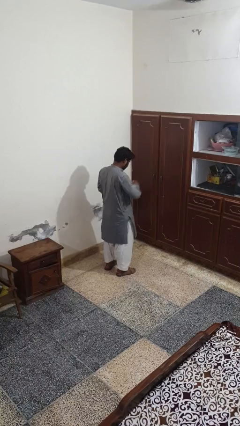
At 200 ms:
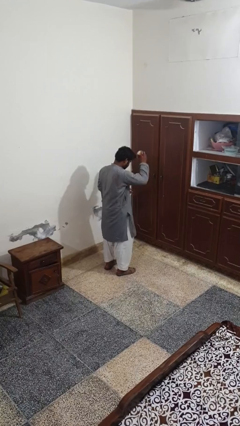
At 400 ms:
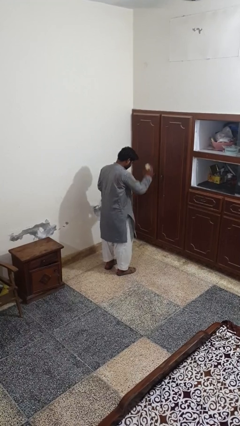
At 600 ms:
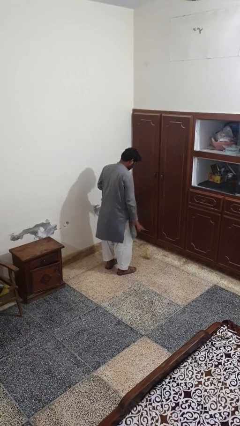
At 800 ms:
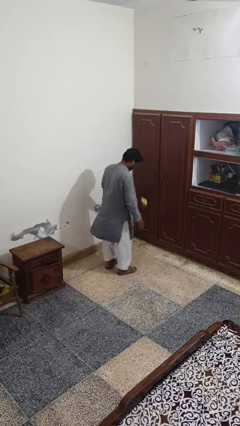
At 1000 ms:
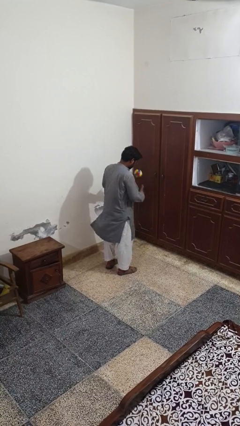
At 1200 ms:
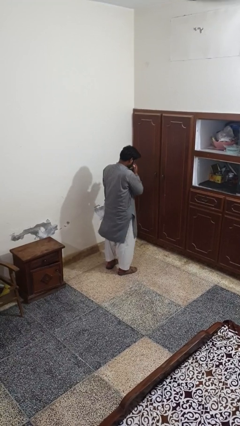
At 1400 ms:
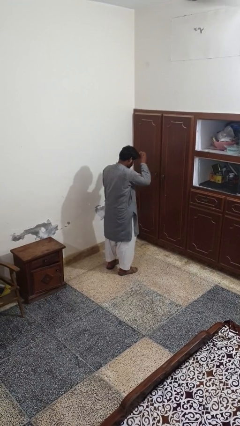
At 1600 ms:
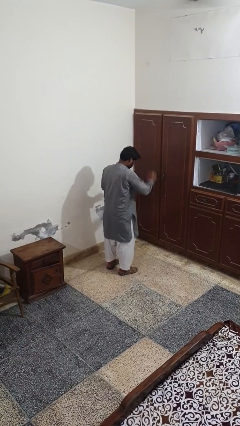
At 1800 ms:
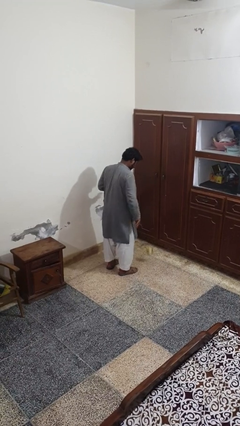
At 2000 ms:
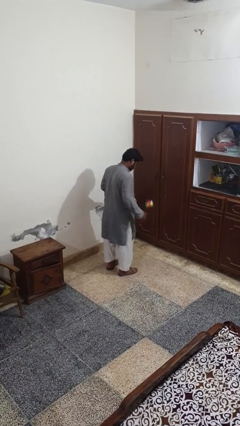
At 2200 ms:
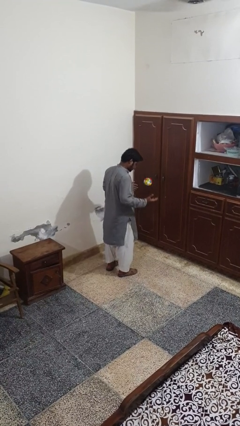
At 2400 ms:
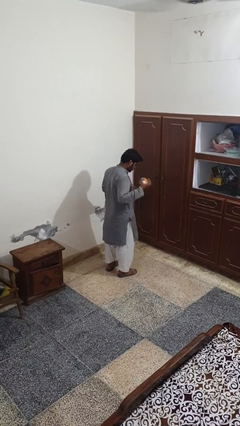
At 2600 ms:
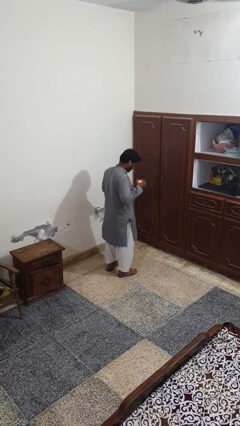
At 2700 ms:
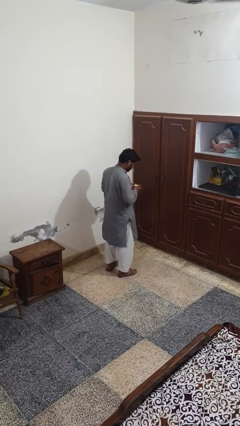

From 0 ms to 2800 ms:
person bounces ball on floor

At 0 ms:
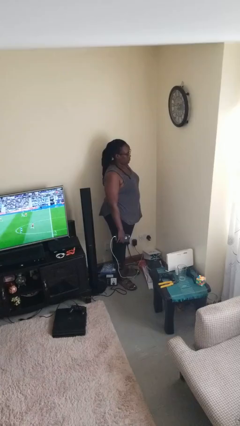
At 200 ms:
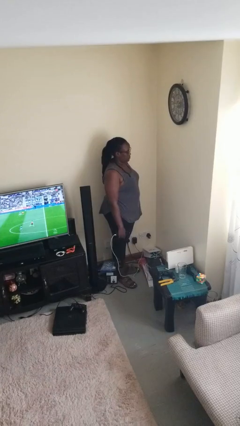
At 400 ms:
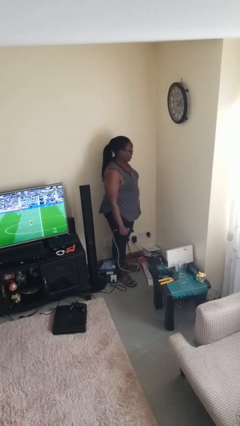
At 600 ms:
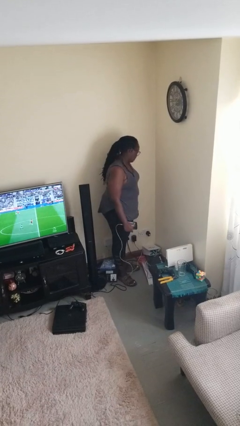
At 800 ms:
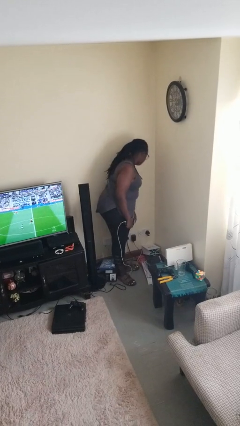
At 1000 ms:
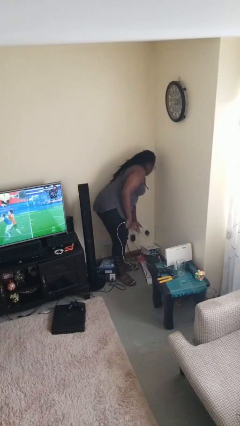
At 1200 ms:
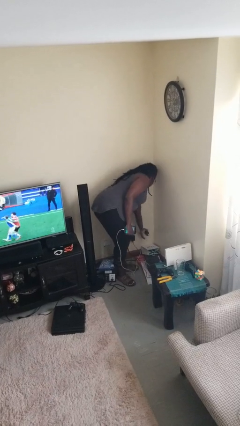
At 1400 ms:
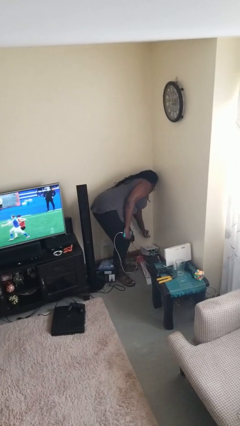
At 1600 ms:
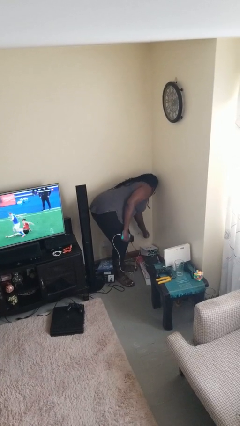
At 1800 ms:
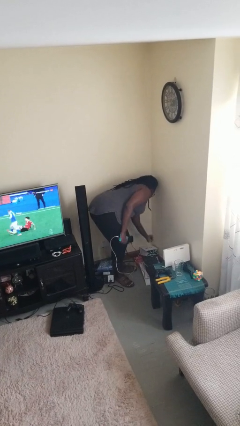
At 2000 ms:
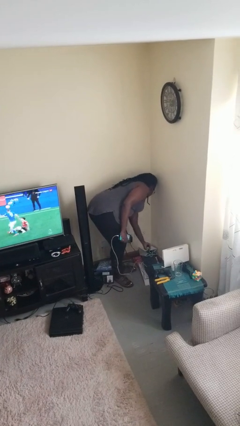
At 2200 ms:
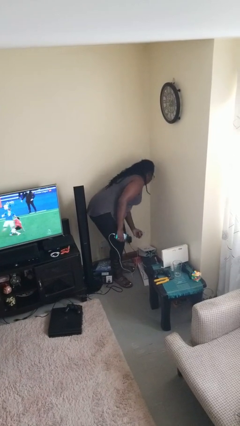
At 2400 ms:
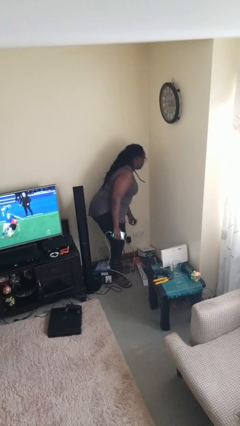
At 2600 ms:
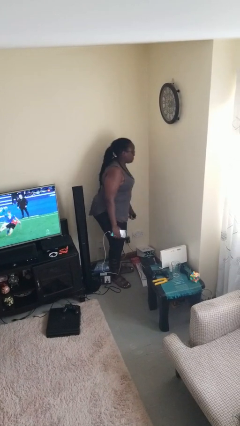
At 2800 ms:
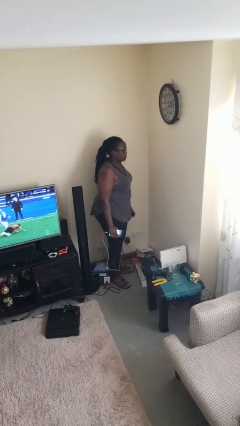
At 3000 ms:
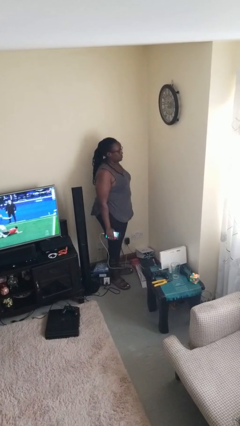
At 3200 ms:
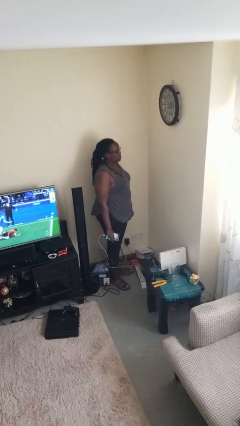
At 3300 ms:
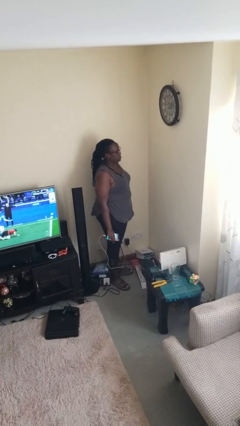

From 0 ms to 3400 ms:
person unplugs from electrical socket

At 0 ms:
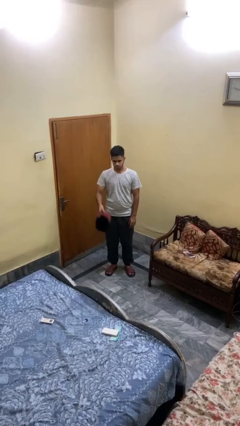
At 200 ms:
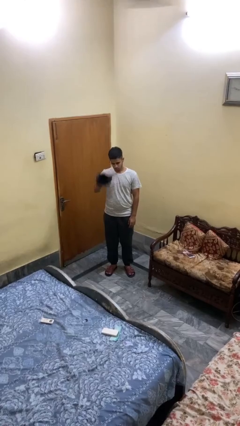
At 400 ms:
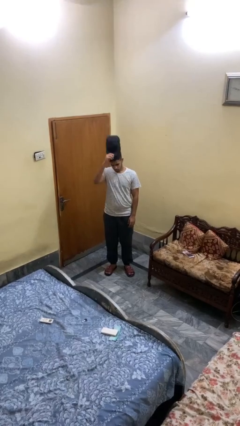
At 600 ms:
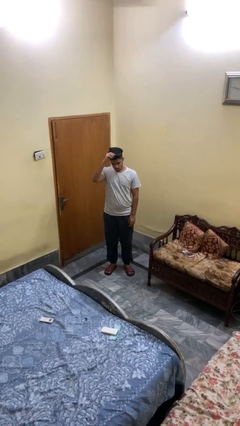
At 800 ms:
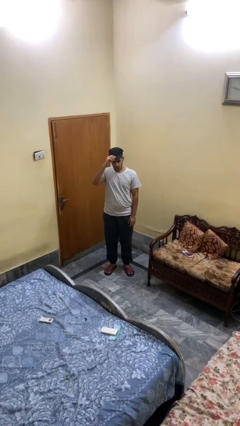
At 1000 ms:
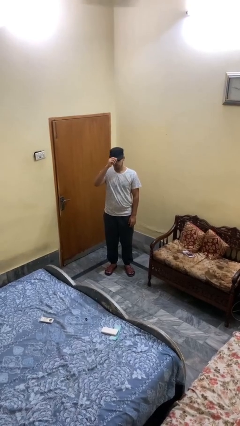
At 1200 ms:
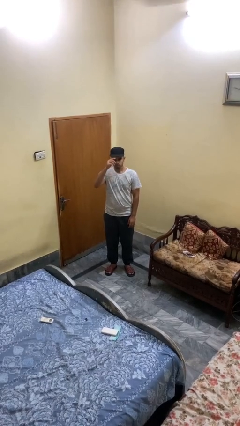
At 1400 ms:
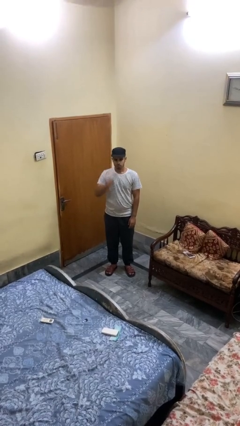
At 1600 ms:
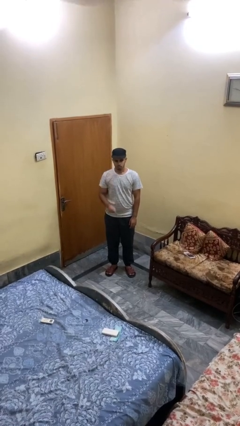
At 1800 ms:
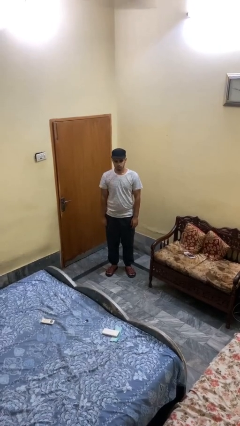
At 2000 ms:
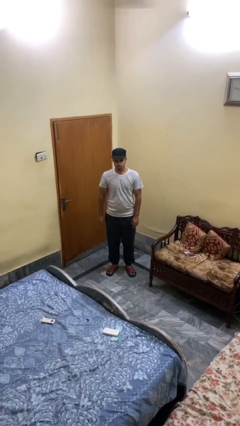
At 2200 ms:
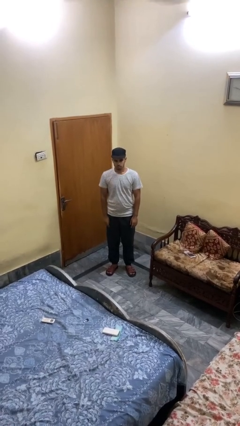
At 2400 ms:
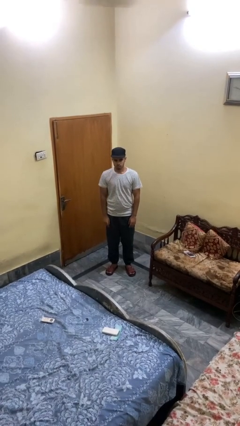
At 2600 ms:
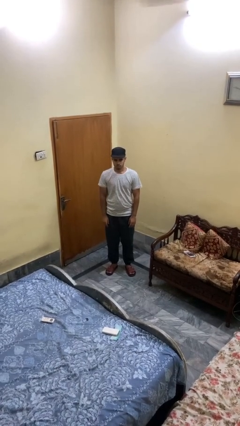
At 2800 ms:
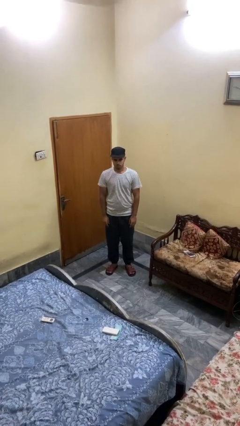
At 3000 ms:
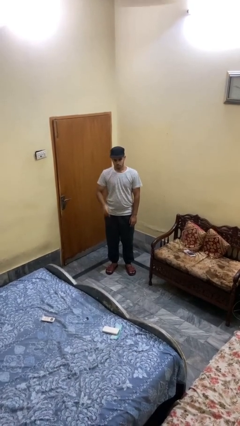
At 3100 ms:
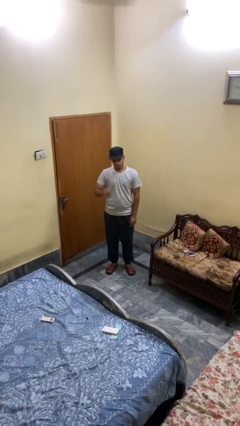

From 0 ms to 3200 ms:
person puts on hat

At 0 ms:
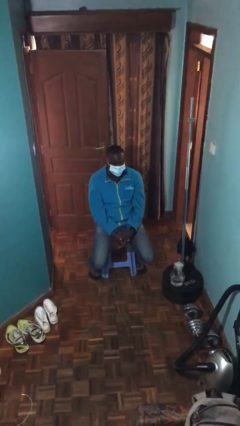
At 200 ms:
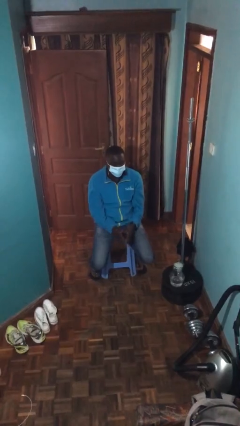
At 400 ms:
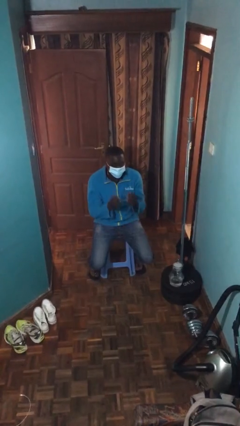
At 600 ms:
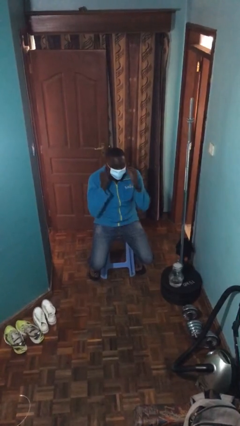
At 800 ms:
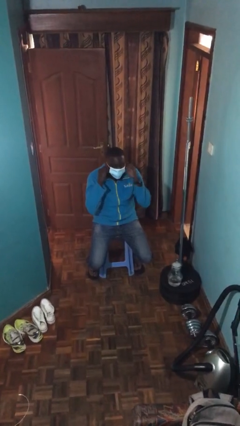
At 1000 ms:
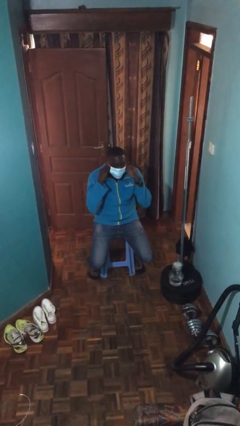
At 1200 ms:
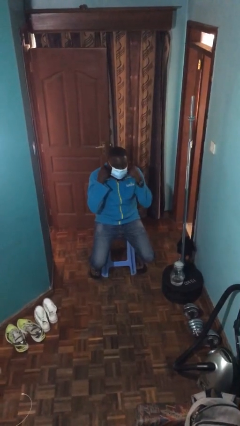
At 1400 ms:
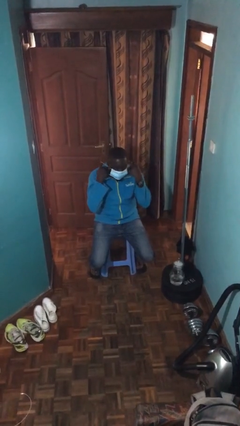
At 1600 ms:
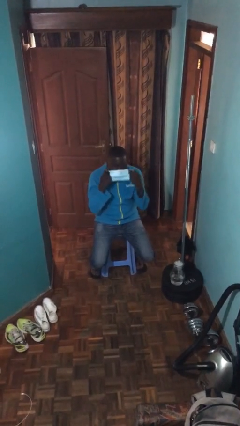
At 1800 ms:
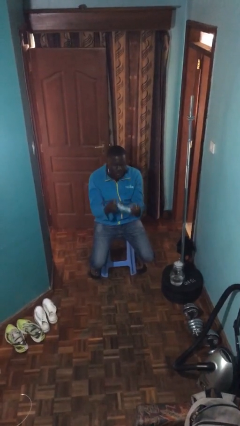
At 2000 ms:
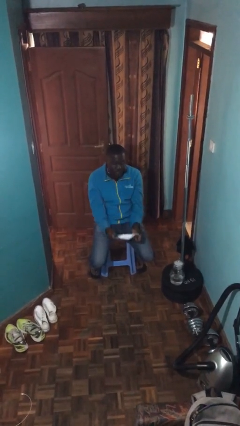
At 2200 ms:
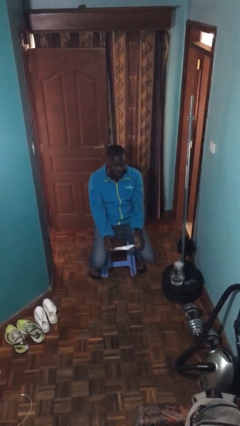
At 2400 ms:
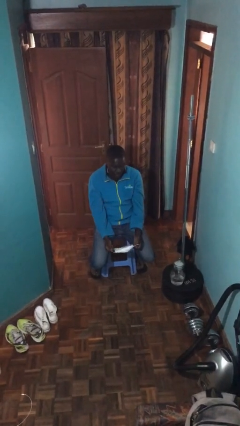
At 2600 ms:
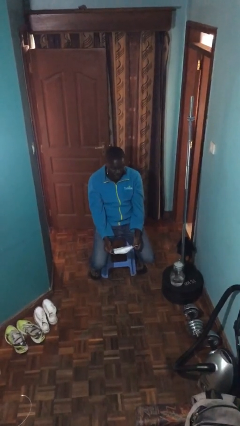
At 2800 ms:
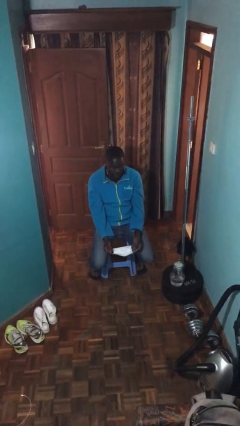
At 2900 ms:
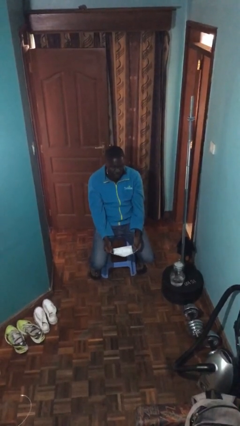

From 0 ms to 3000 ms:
person takes off facemask

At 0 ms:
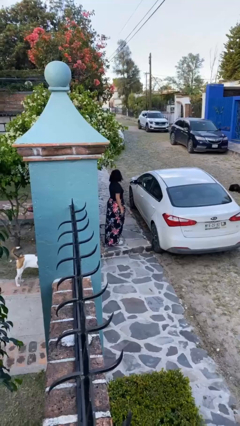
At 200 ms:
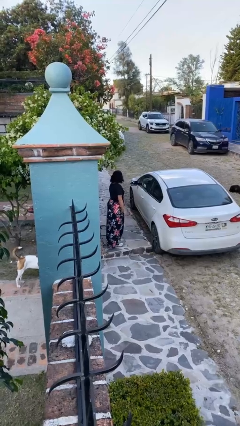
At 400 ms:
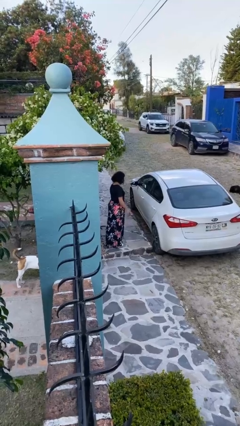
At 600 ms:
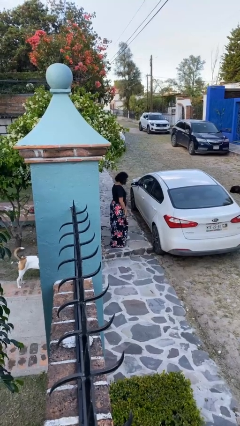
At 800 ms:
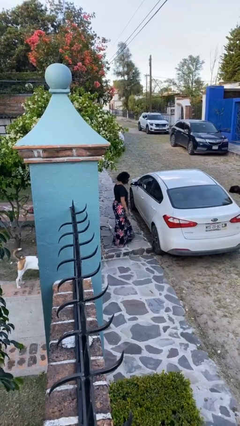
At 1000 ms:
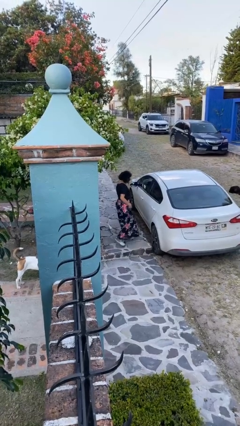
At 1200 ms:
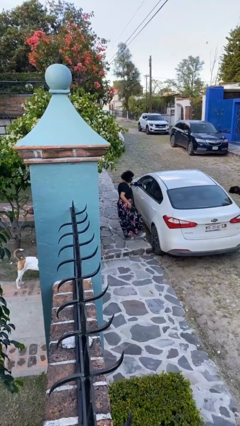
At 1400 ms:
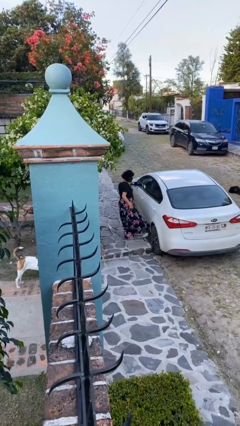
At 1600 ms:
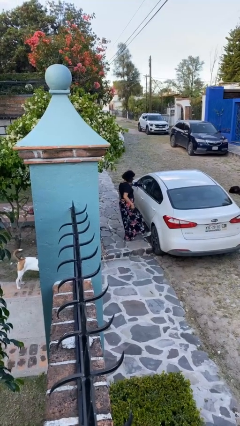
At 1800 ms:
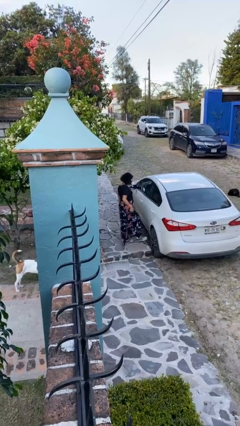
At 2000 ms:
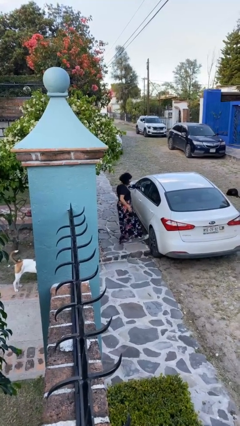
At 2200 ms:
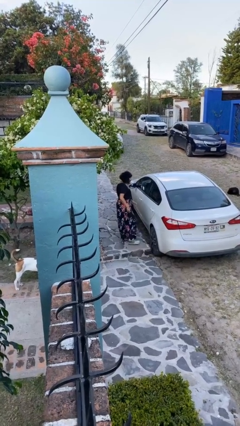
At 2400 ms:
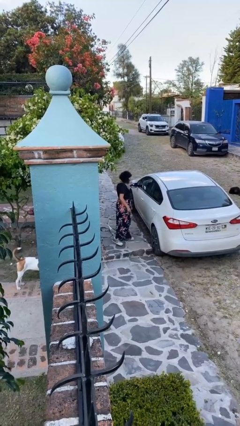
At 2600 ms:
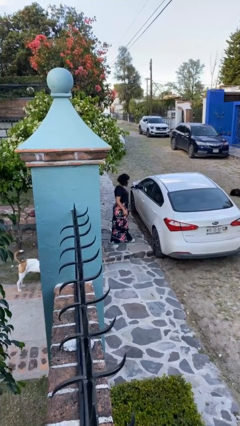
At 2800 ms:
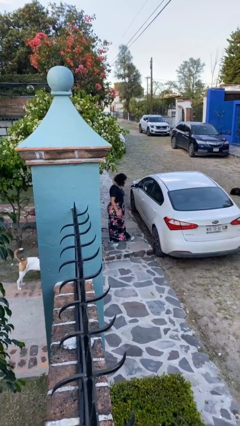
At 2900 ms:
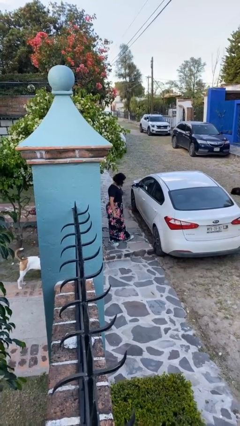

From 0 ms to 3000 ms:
person kicks car tires

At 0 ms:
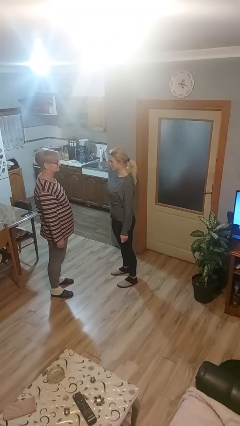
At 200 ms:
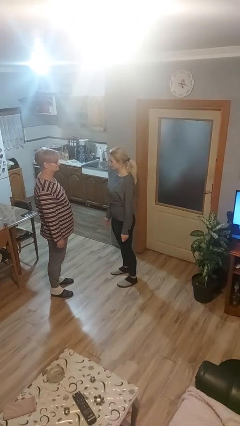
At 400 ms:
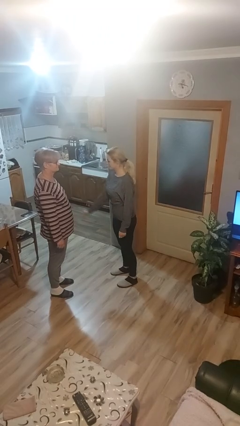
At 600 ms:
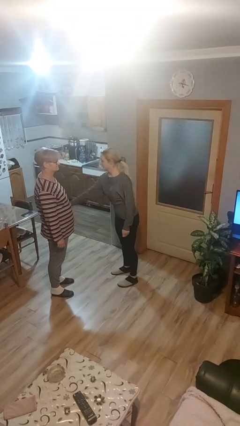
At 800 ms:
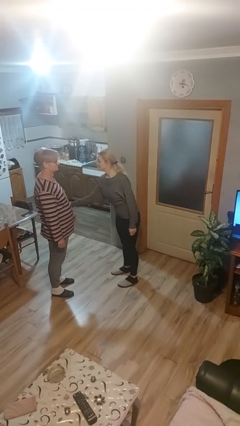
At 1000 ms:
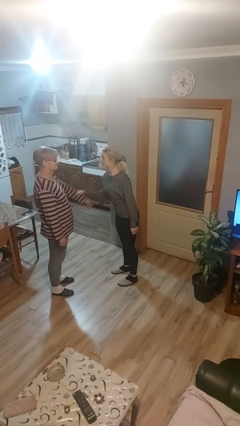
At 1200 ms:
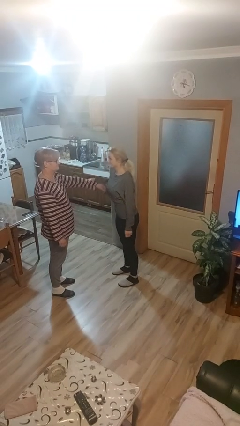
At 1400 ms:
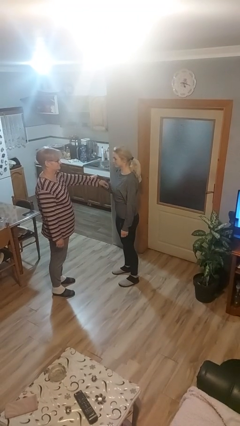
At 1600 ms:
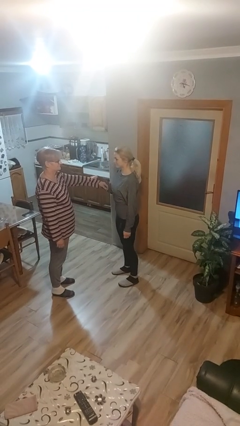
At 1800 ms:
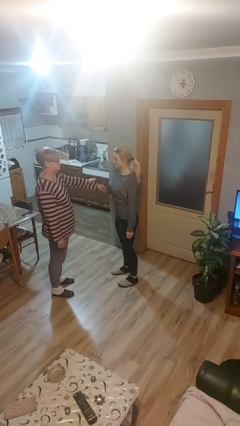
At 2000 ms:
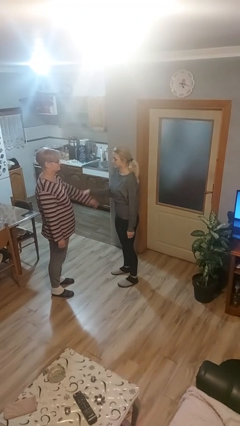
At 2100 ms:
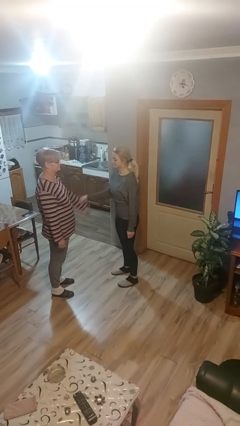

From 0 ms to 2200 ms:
person grabs person by forearm
